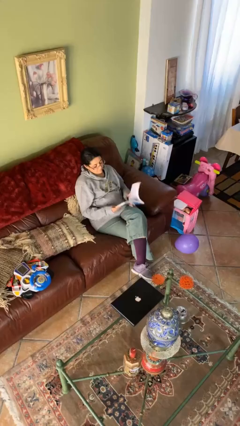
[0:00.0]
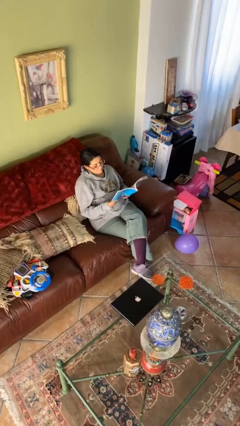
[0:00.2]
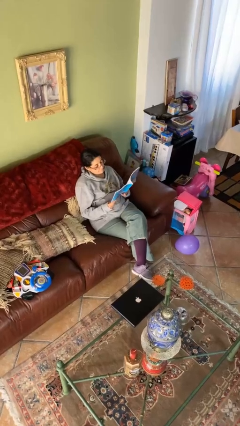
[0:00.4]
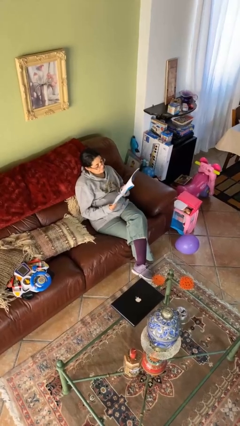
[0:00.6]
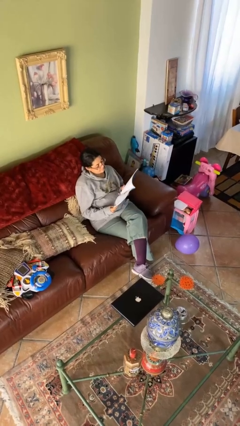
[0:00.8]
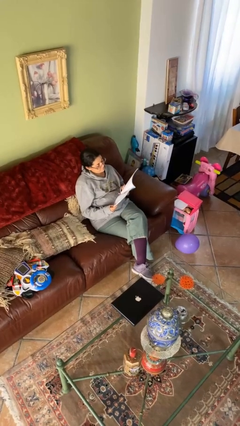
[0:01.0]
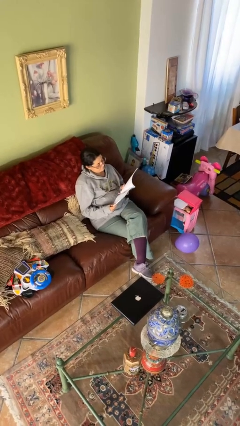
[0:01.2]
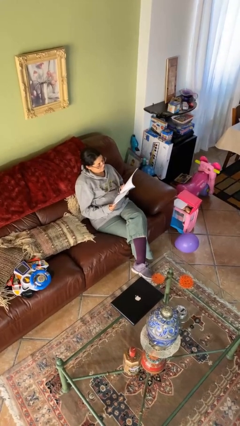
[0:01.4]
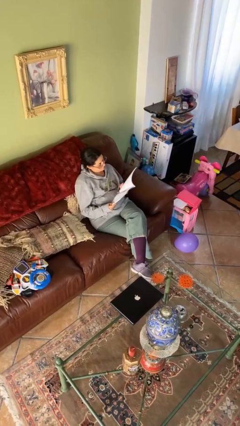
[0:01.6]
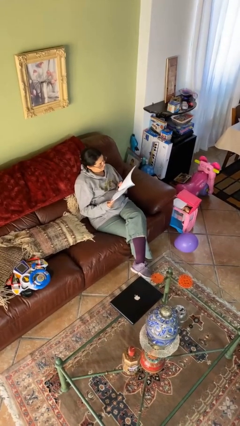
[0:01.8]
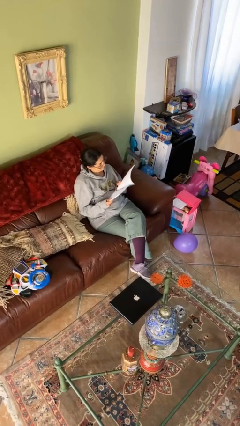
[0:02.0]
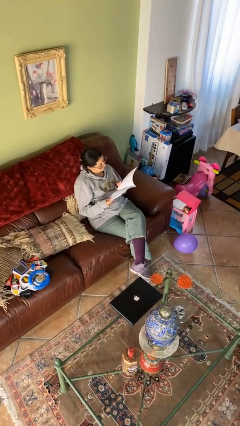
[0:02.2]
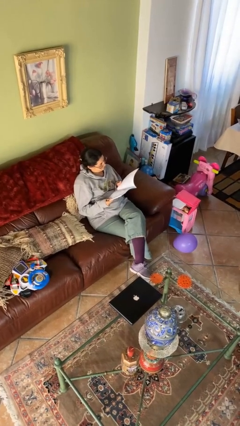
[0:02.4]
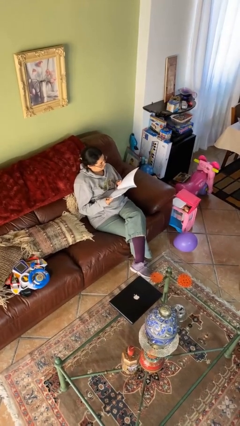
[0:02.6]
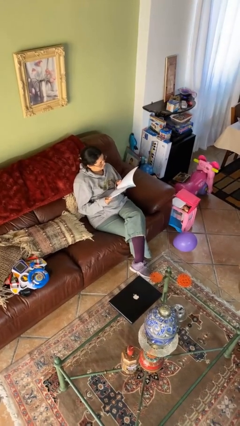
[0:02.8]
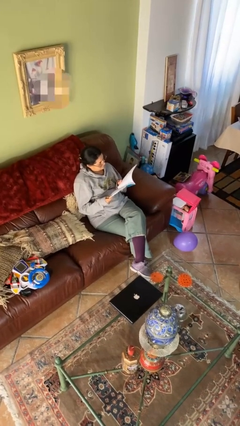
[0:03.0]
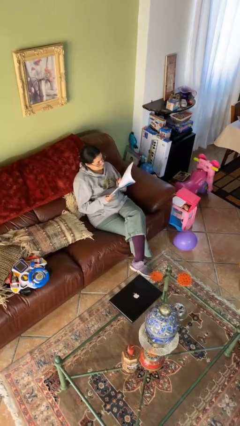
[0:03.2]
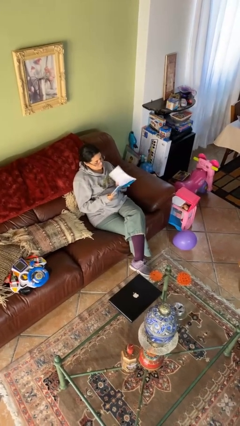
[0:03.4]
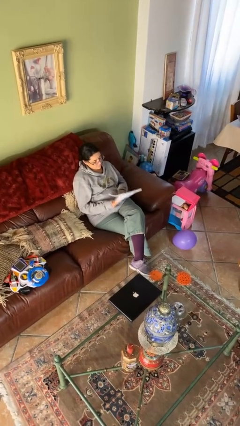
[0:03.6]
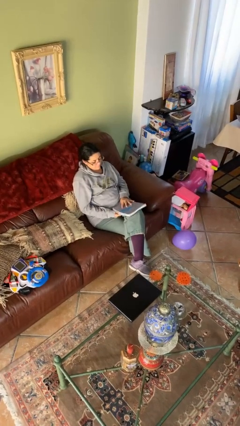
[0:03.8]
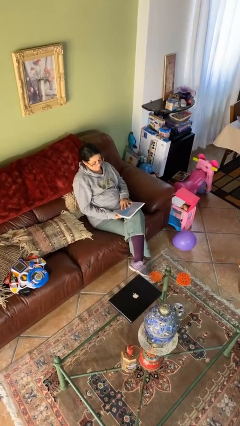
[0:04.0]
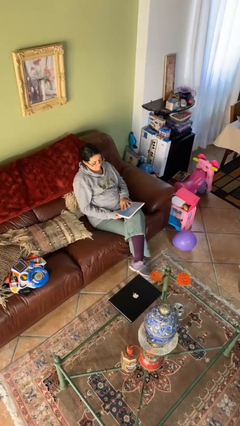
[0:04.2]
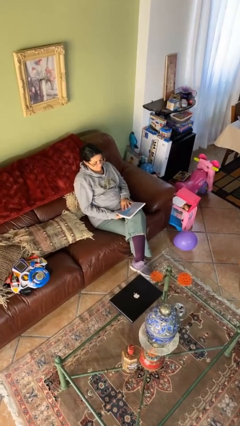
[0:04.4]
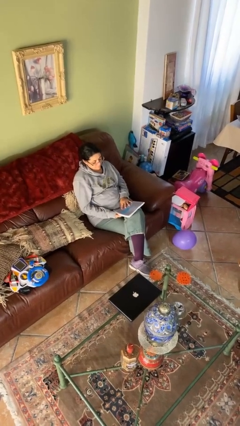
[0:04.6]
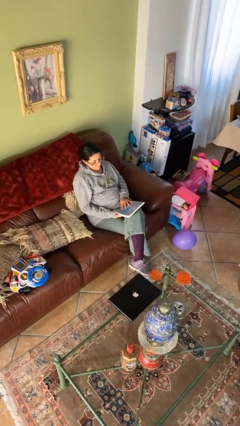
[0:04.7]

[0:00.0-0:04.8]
person reads document

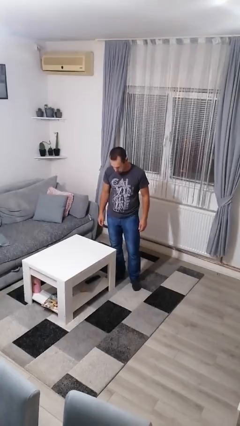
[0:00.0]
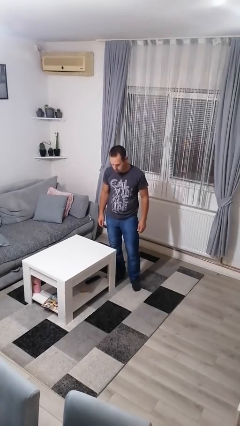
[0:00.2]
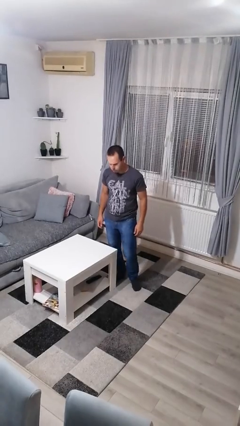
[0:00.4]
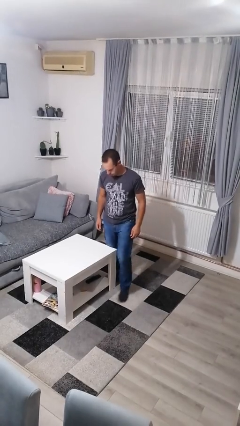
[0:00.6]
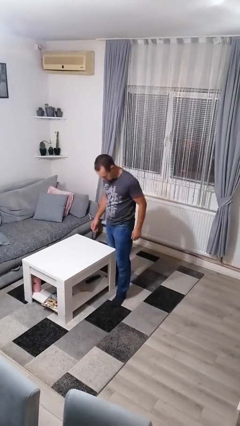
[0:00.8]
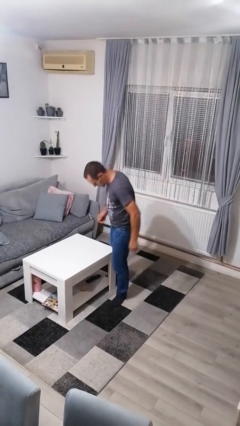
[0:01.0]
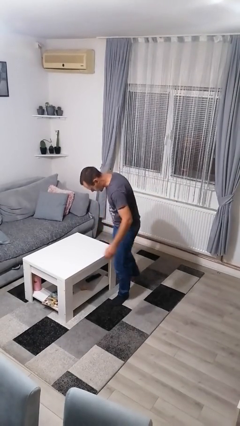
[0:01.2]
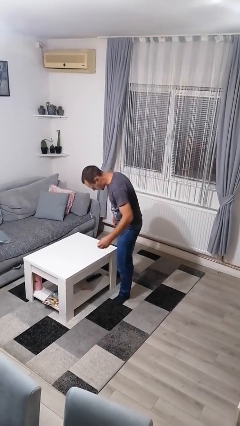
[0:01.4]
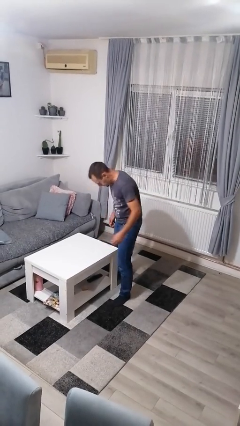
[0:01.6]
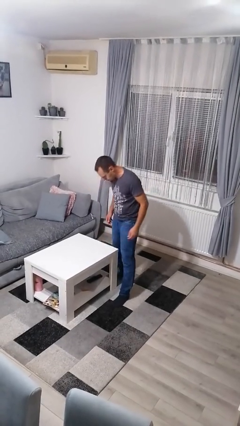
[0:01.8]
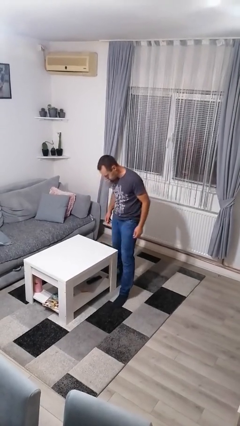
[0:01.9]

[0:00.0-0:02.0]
person bumps into table

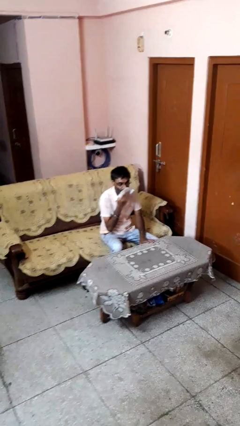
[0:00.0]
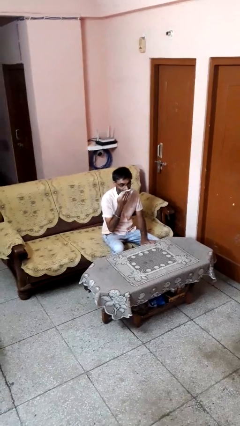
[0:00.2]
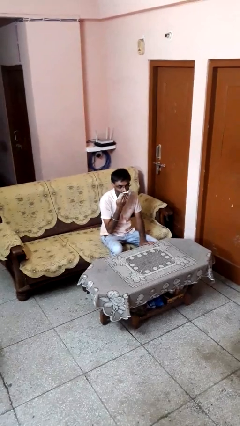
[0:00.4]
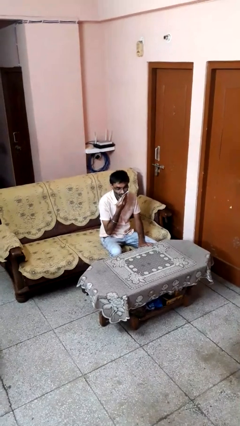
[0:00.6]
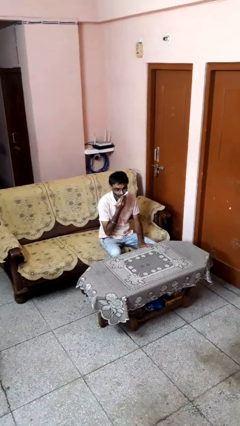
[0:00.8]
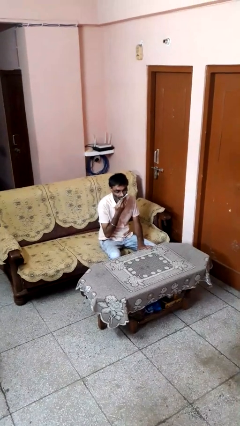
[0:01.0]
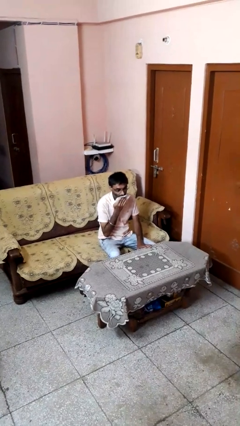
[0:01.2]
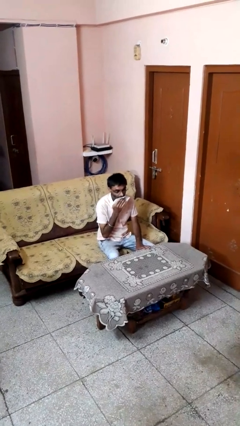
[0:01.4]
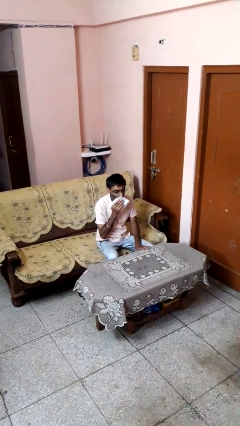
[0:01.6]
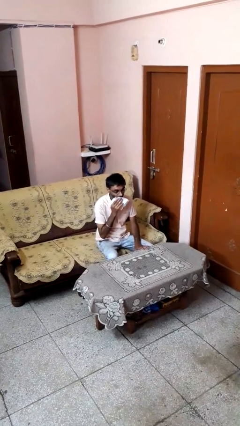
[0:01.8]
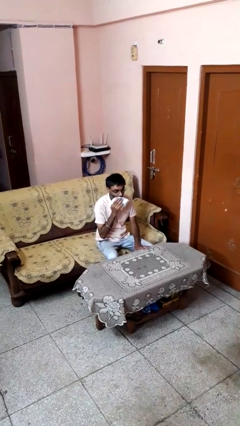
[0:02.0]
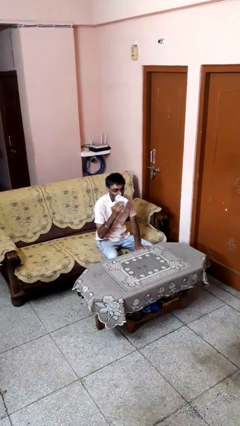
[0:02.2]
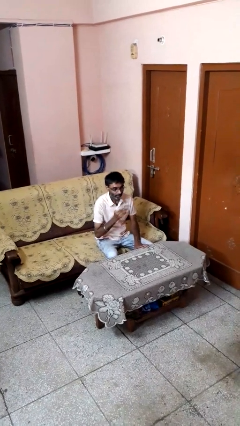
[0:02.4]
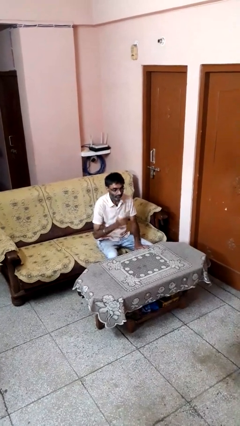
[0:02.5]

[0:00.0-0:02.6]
person wipes mouth with napkin

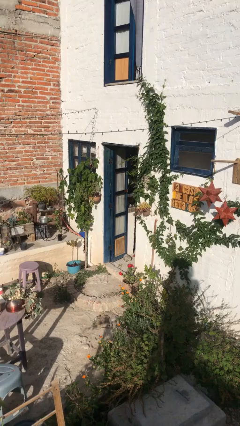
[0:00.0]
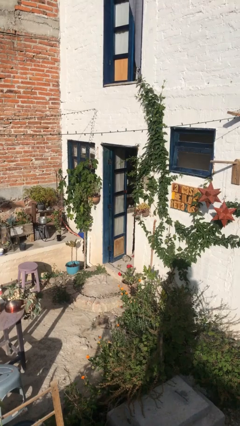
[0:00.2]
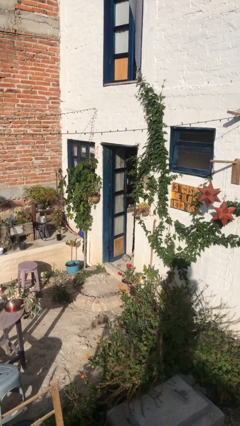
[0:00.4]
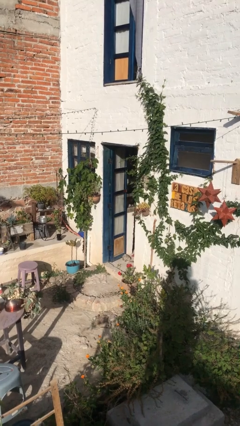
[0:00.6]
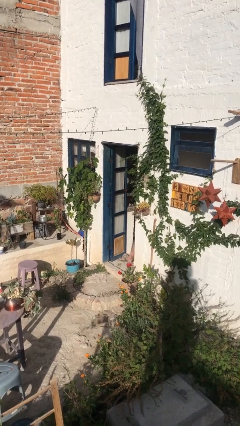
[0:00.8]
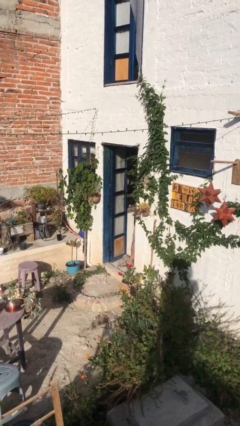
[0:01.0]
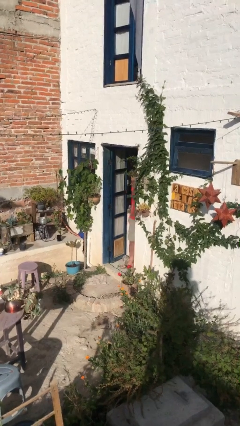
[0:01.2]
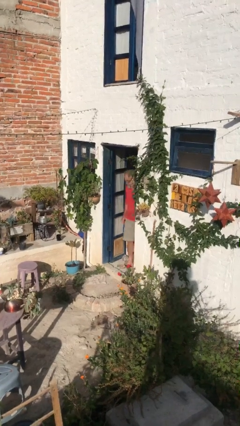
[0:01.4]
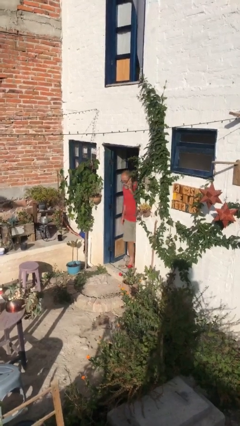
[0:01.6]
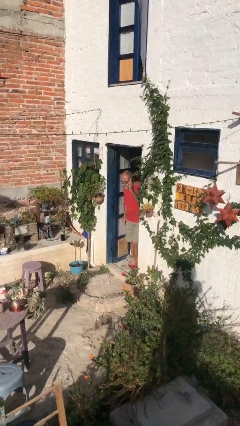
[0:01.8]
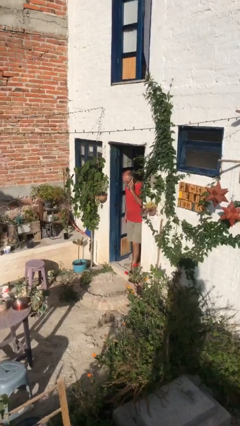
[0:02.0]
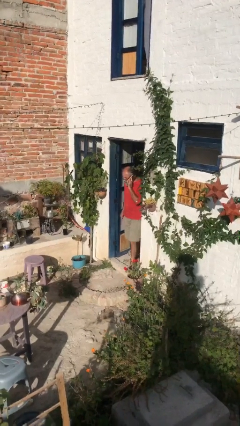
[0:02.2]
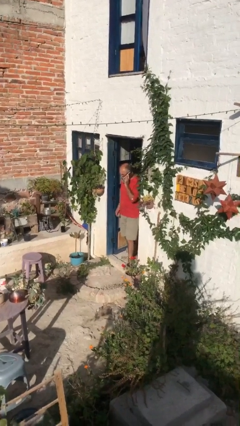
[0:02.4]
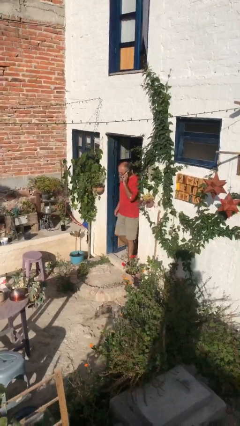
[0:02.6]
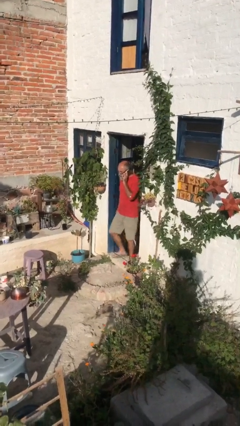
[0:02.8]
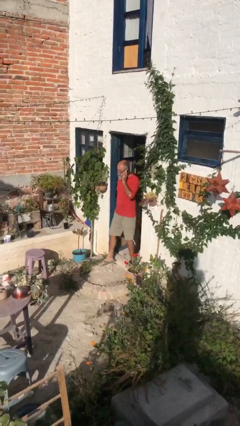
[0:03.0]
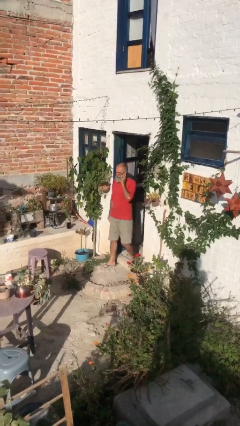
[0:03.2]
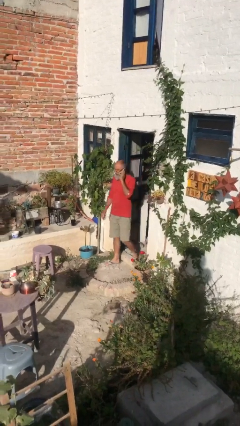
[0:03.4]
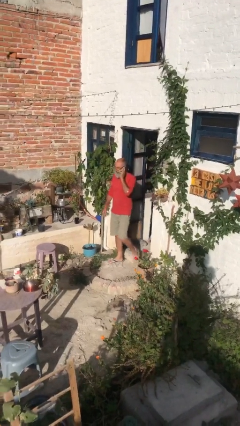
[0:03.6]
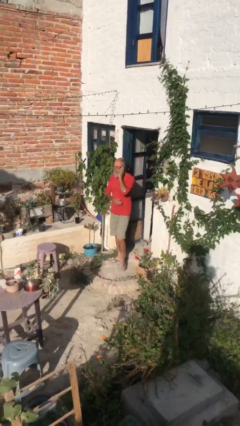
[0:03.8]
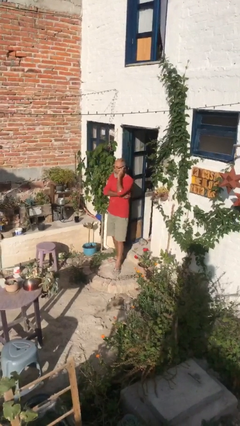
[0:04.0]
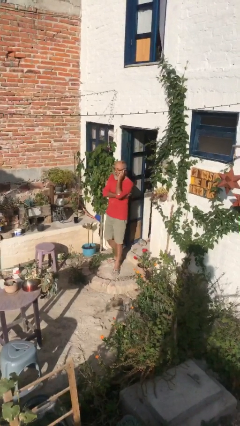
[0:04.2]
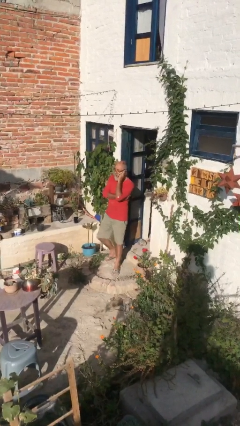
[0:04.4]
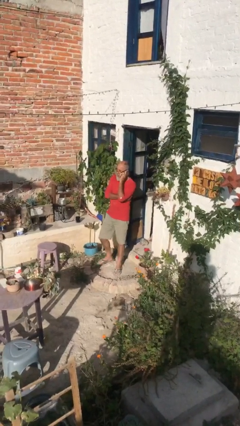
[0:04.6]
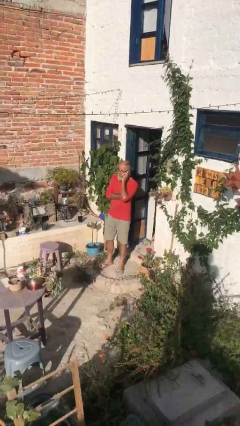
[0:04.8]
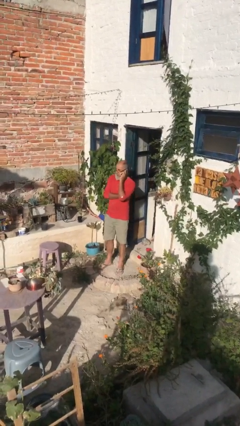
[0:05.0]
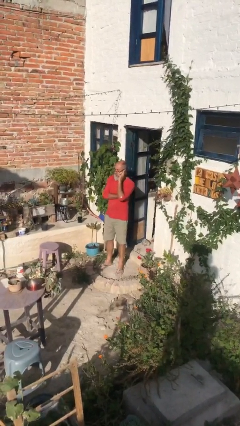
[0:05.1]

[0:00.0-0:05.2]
person enters scene through structure

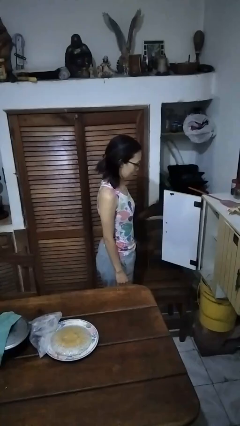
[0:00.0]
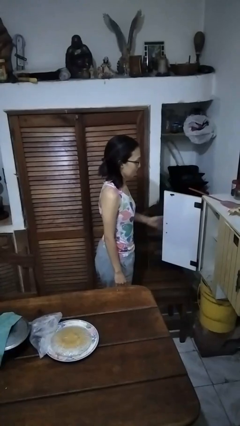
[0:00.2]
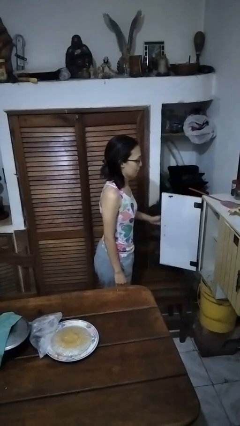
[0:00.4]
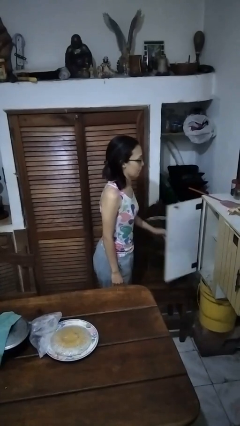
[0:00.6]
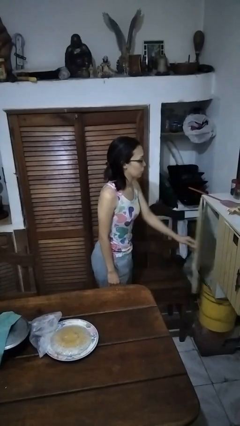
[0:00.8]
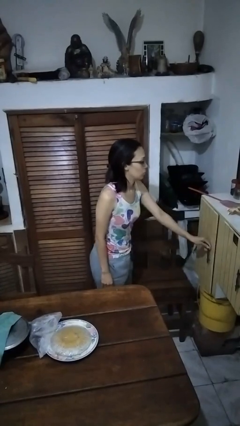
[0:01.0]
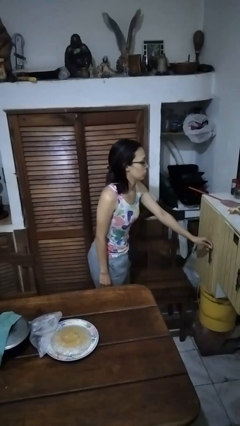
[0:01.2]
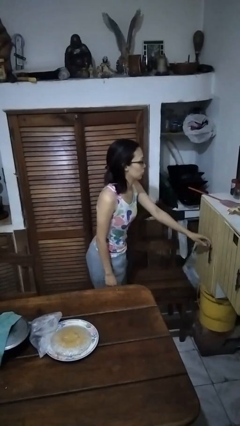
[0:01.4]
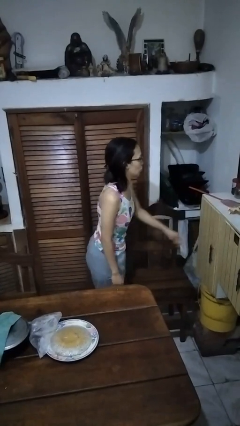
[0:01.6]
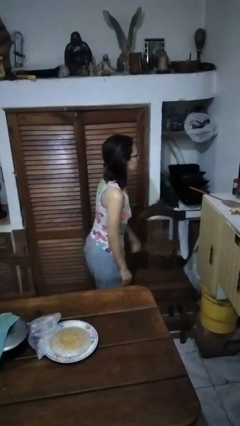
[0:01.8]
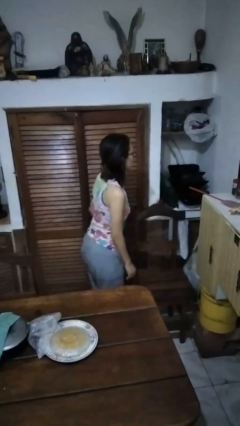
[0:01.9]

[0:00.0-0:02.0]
person closes cabinet

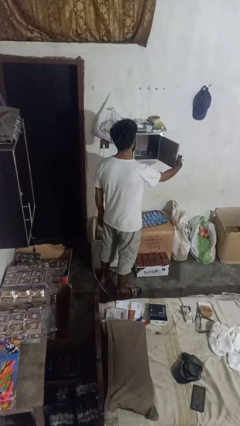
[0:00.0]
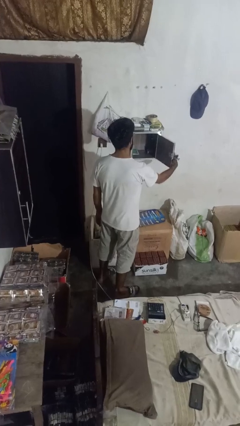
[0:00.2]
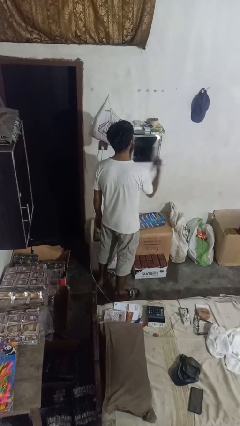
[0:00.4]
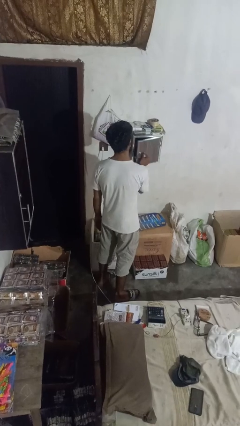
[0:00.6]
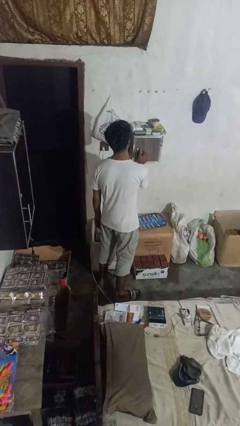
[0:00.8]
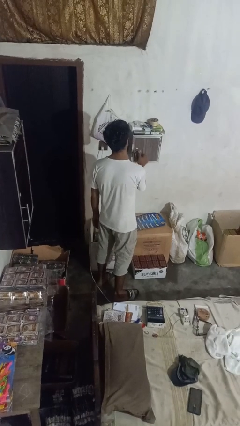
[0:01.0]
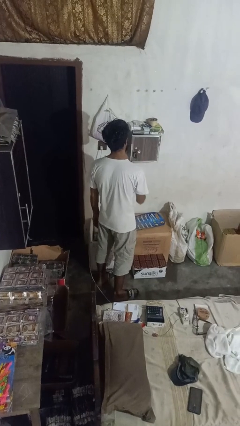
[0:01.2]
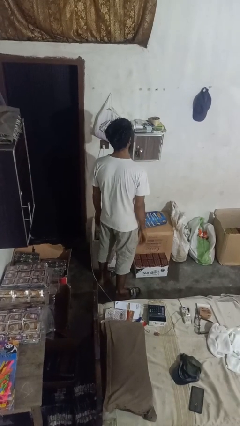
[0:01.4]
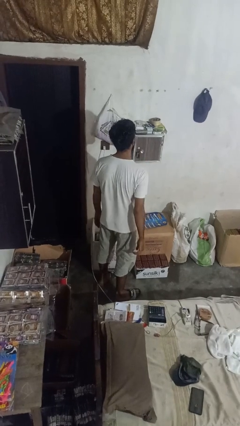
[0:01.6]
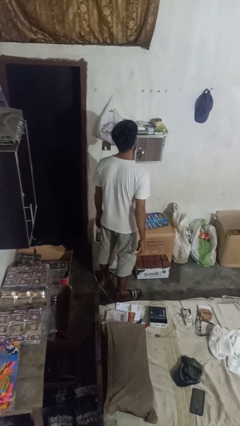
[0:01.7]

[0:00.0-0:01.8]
person puts down object into cabinet
